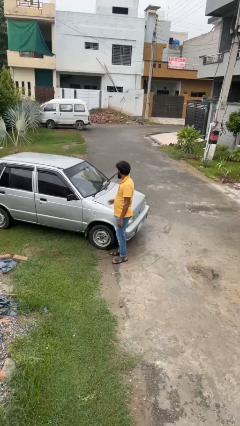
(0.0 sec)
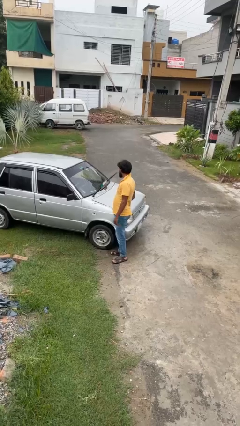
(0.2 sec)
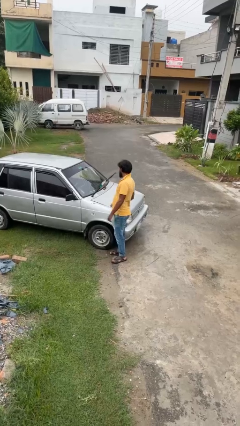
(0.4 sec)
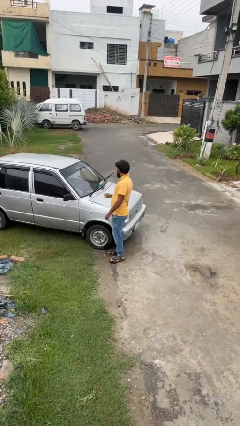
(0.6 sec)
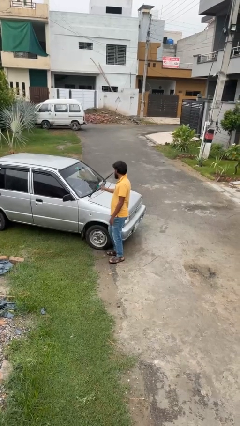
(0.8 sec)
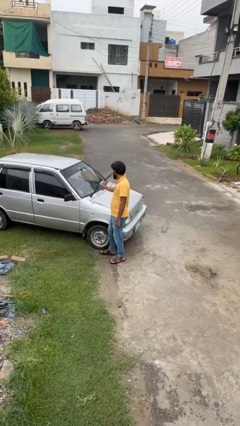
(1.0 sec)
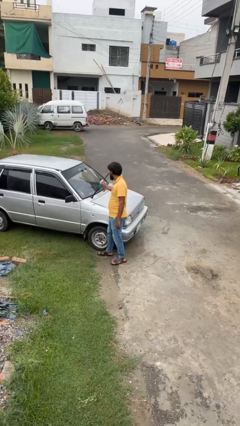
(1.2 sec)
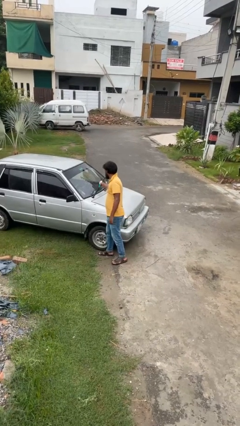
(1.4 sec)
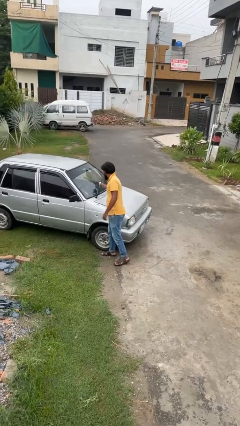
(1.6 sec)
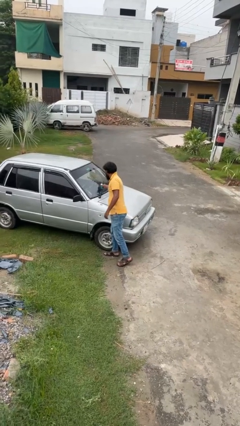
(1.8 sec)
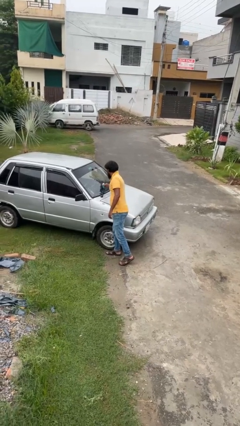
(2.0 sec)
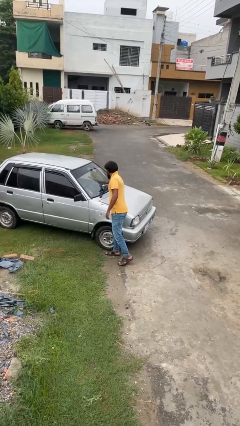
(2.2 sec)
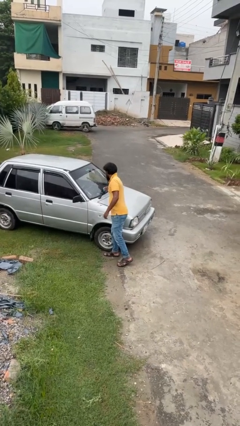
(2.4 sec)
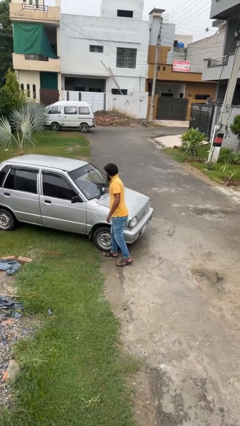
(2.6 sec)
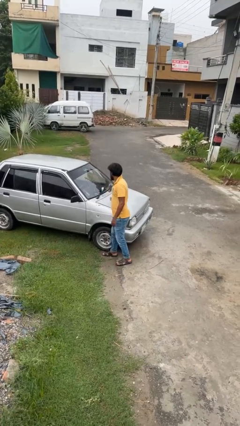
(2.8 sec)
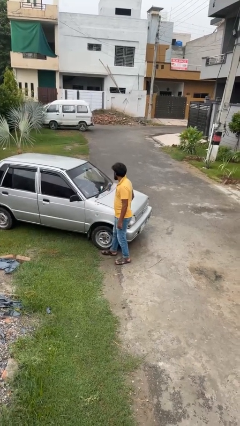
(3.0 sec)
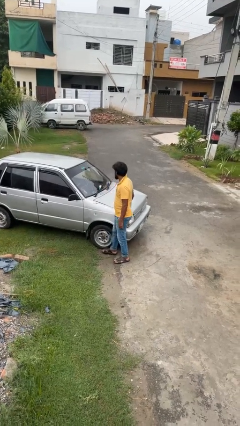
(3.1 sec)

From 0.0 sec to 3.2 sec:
person flips down car wipers

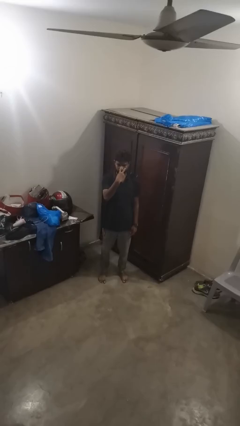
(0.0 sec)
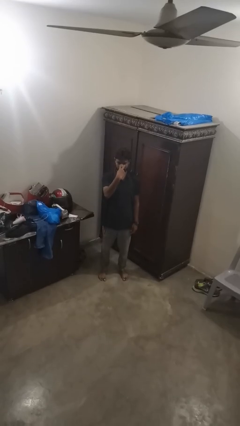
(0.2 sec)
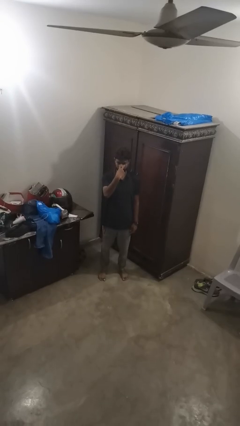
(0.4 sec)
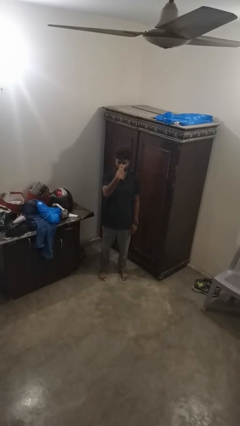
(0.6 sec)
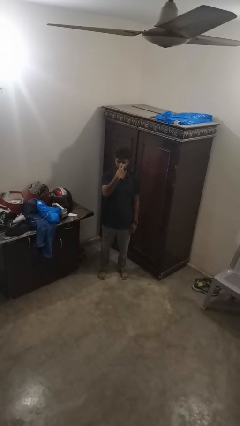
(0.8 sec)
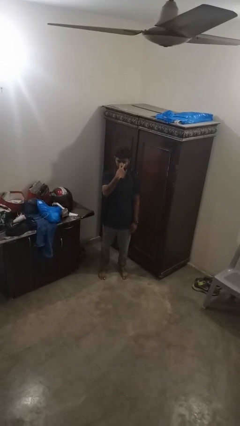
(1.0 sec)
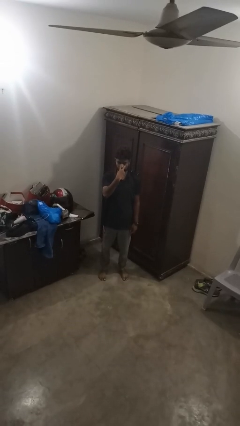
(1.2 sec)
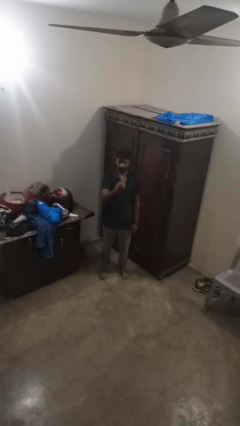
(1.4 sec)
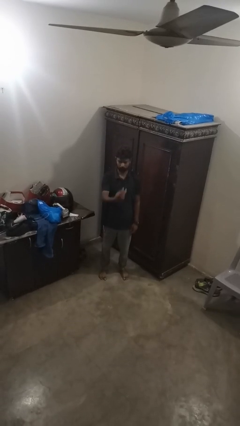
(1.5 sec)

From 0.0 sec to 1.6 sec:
person gestures watch closely

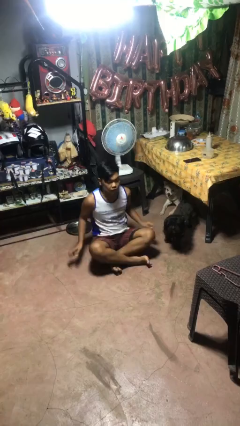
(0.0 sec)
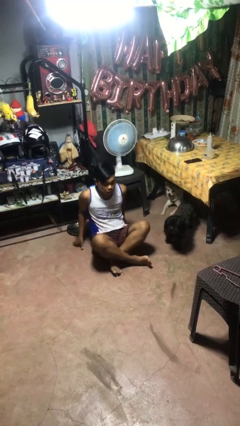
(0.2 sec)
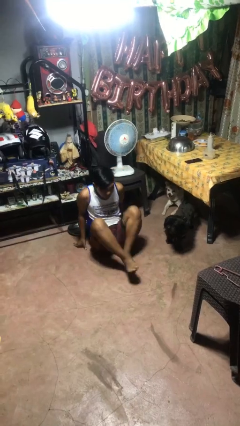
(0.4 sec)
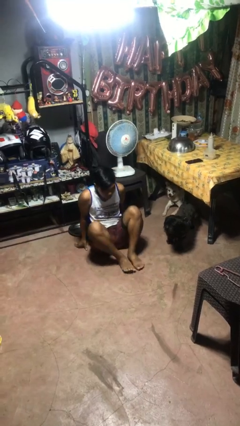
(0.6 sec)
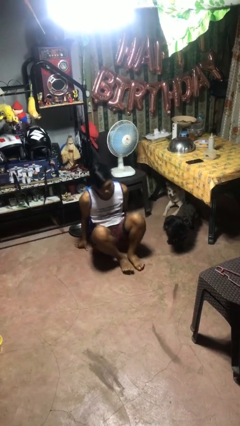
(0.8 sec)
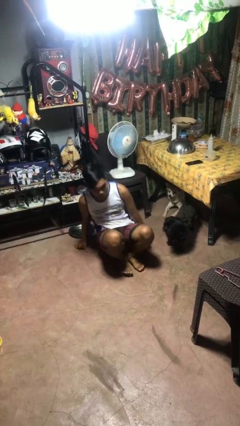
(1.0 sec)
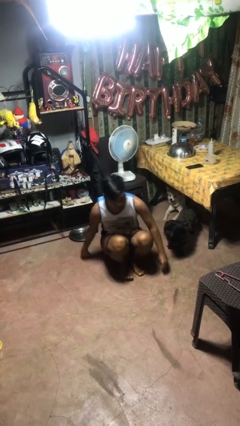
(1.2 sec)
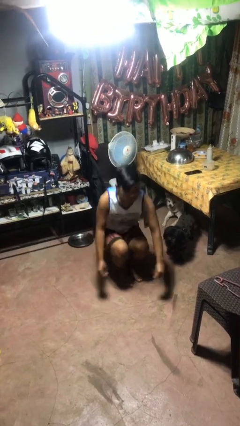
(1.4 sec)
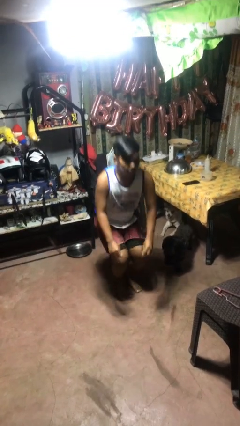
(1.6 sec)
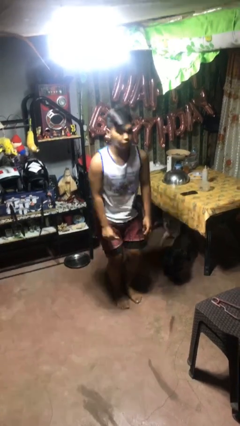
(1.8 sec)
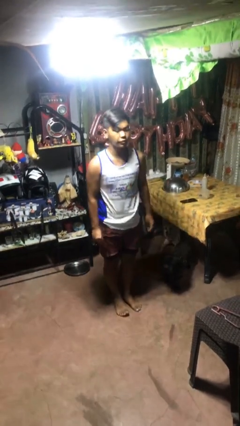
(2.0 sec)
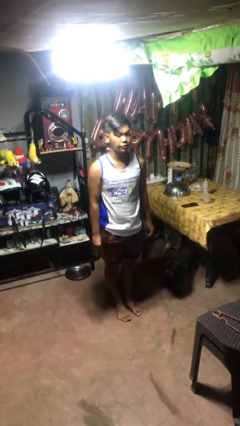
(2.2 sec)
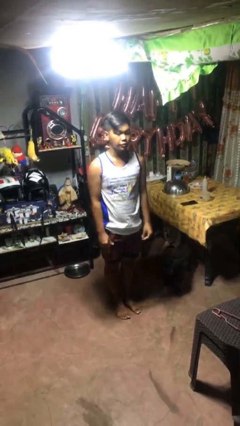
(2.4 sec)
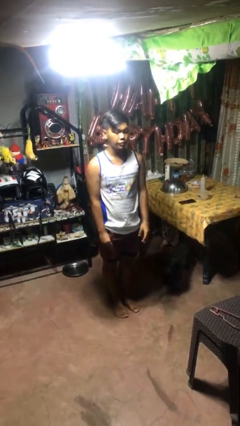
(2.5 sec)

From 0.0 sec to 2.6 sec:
person stands up from floor

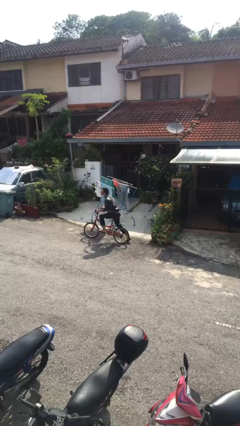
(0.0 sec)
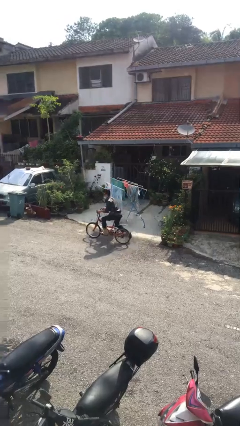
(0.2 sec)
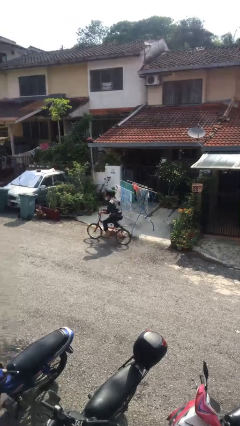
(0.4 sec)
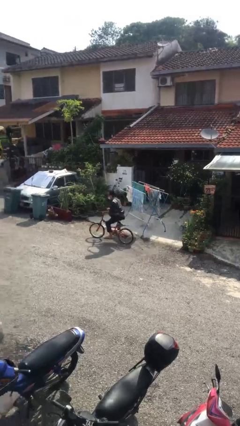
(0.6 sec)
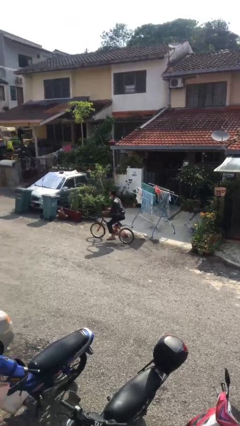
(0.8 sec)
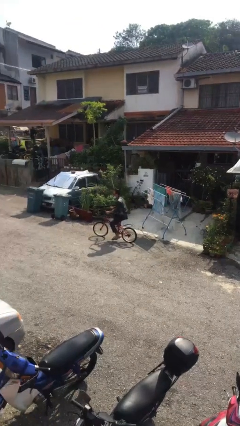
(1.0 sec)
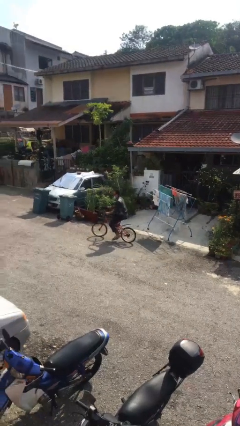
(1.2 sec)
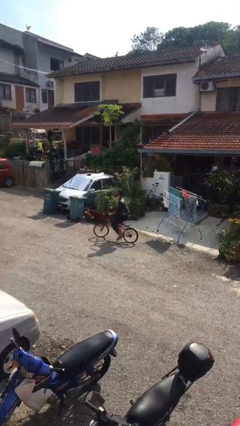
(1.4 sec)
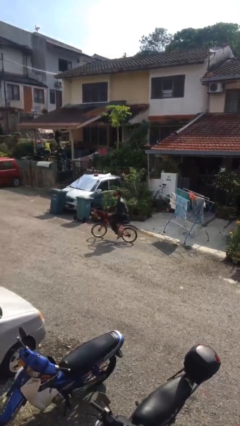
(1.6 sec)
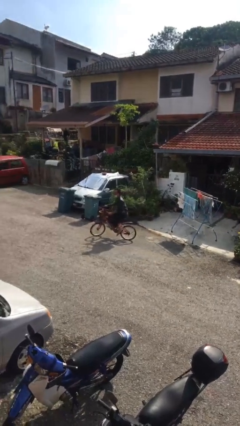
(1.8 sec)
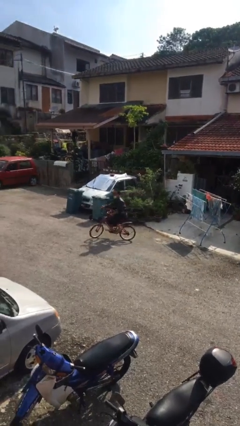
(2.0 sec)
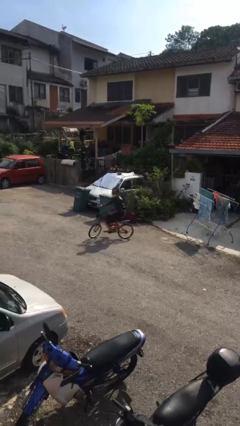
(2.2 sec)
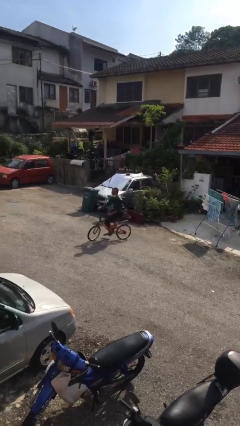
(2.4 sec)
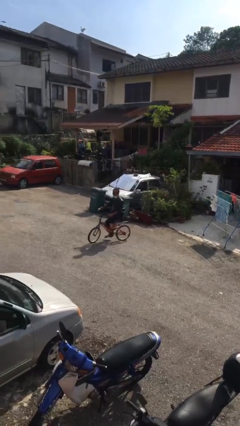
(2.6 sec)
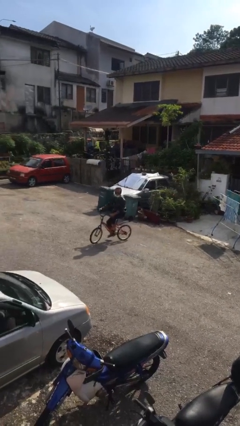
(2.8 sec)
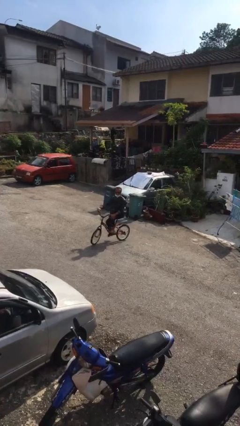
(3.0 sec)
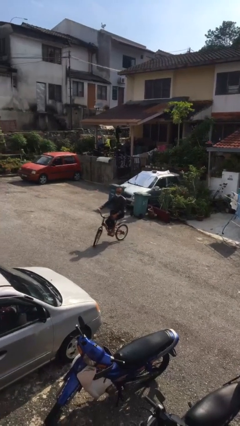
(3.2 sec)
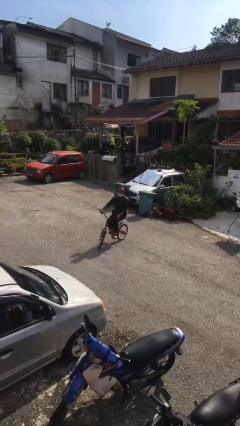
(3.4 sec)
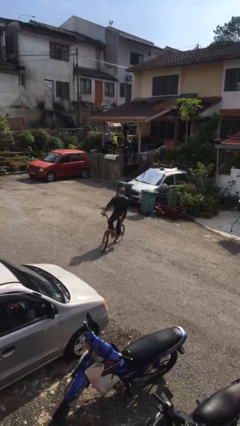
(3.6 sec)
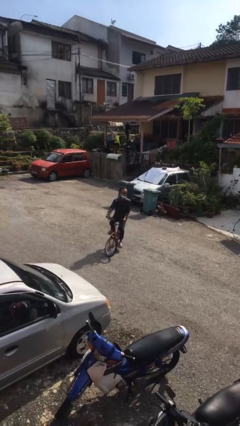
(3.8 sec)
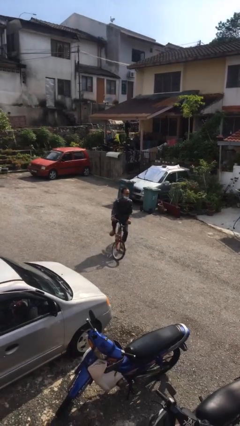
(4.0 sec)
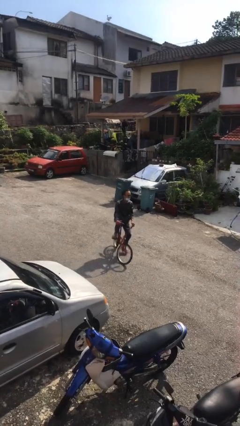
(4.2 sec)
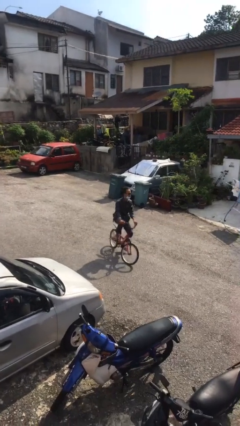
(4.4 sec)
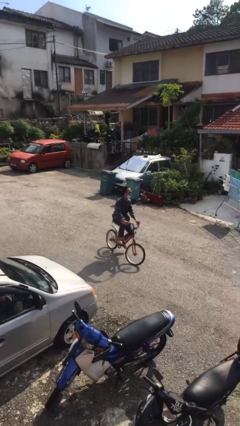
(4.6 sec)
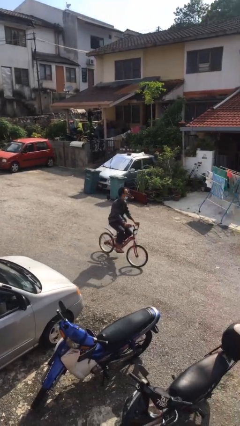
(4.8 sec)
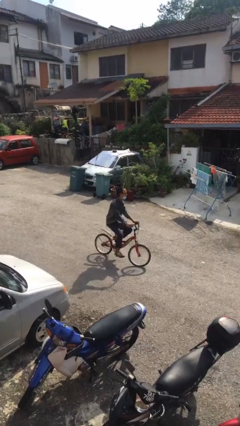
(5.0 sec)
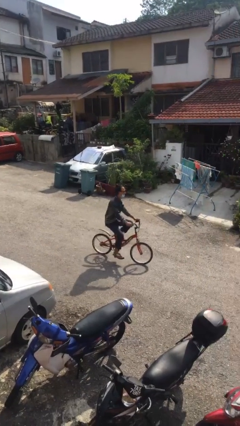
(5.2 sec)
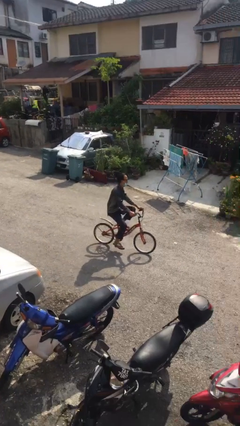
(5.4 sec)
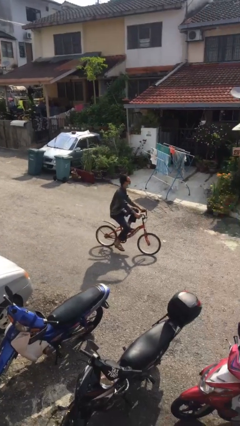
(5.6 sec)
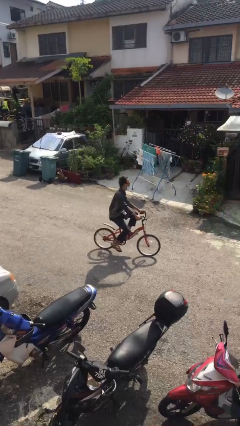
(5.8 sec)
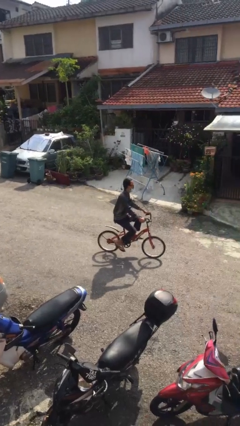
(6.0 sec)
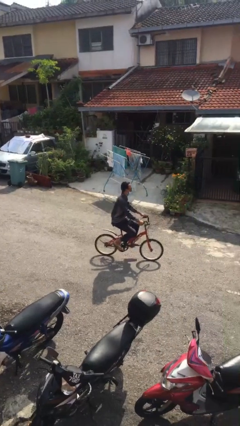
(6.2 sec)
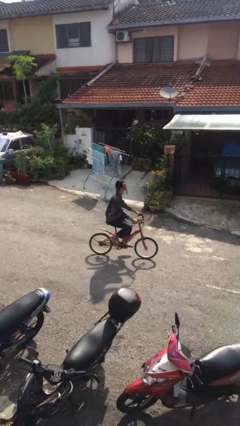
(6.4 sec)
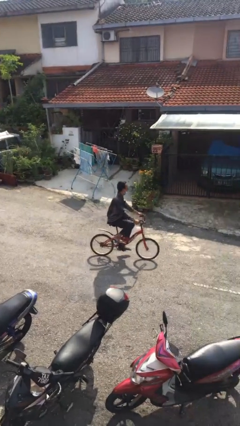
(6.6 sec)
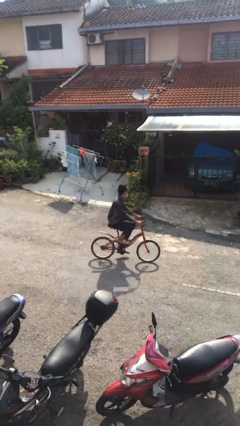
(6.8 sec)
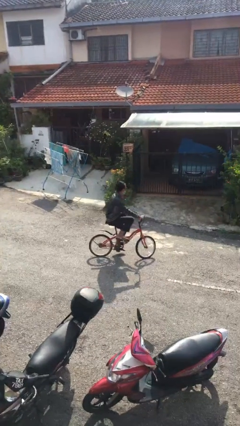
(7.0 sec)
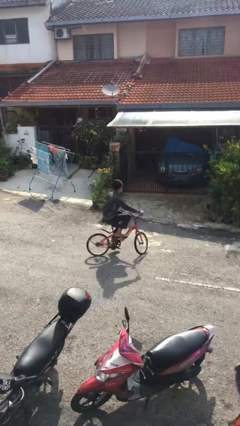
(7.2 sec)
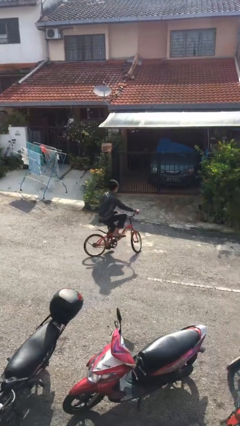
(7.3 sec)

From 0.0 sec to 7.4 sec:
person rides bicycle

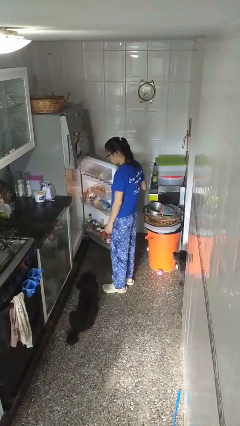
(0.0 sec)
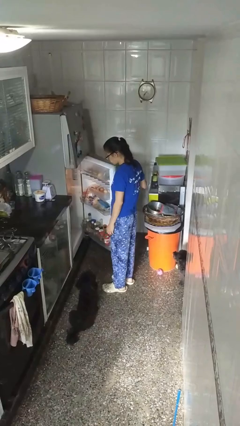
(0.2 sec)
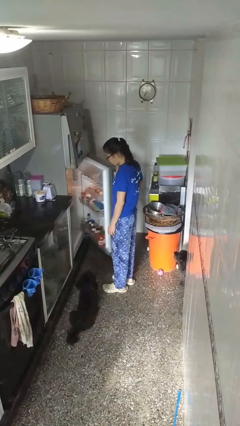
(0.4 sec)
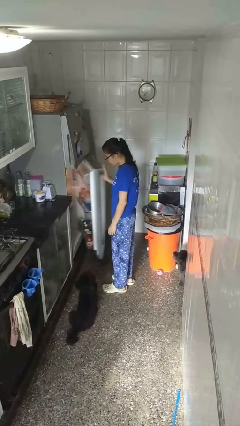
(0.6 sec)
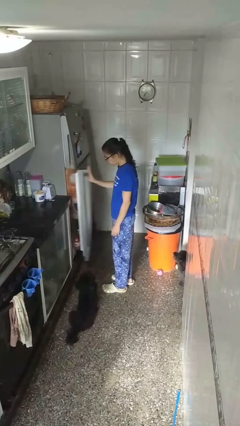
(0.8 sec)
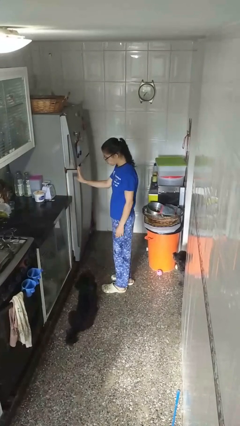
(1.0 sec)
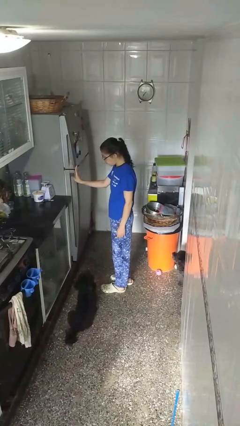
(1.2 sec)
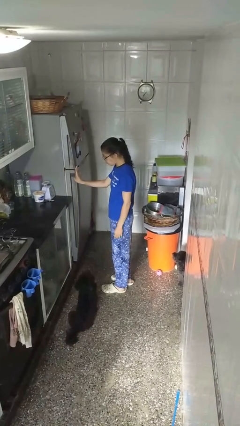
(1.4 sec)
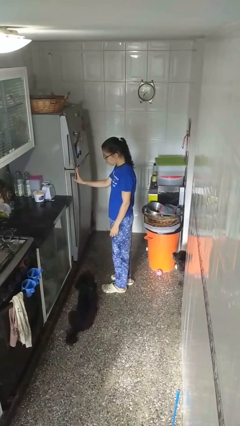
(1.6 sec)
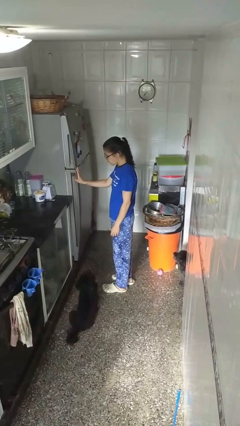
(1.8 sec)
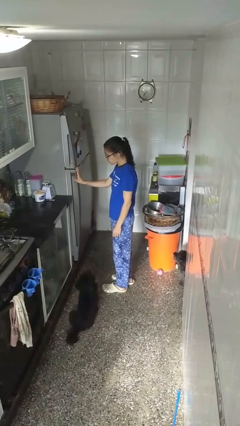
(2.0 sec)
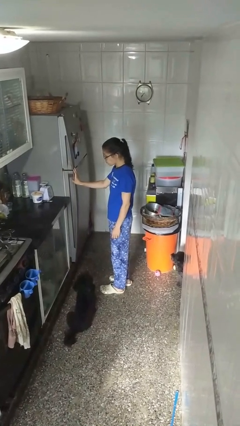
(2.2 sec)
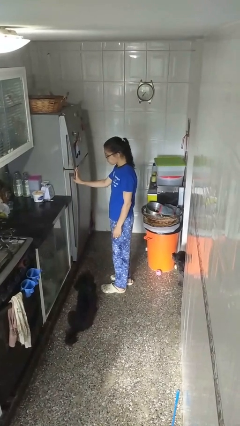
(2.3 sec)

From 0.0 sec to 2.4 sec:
person closes refrigerator
